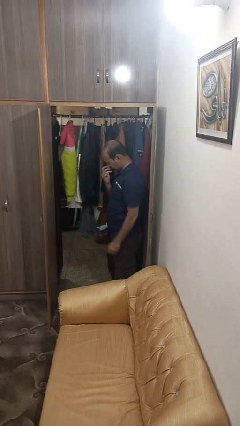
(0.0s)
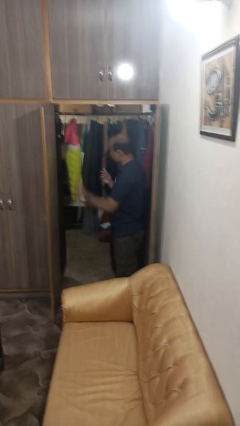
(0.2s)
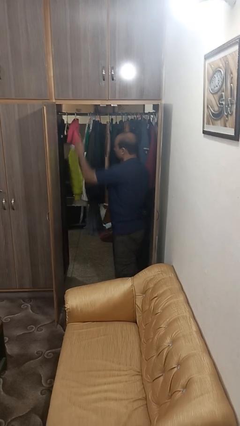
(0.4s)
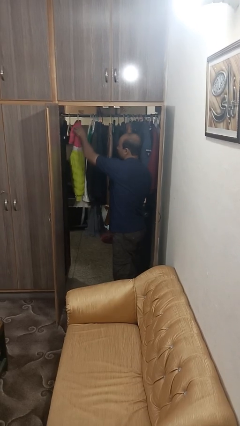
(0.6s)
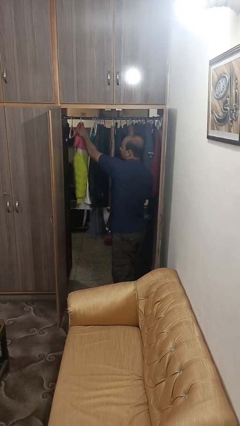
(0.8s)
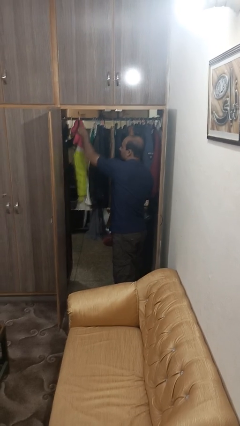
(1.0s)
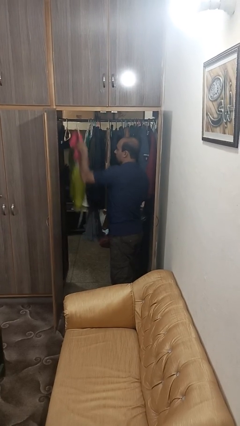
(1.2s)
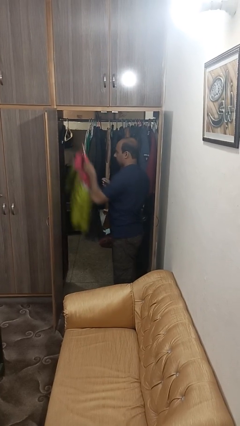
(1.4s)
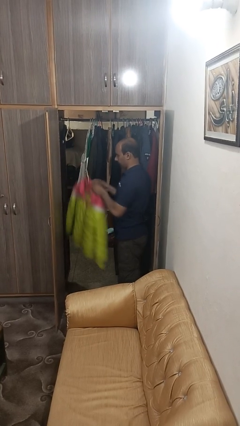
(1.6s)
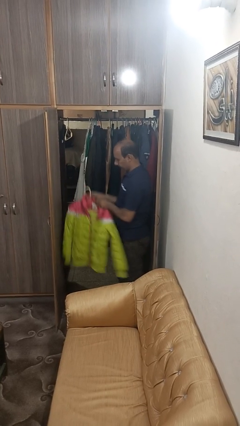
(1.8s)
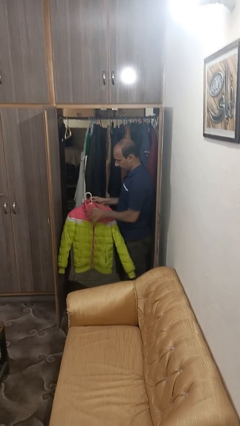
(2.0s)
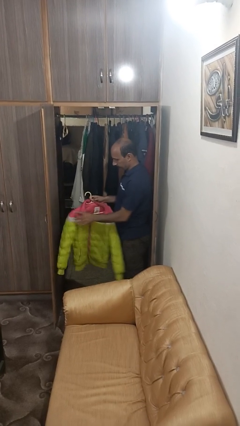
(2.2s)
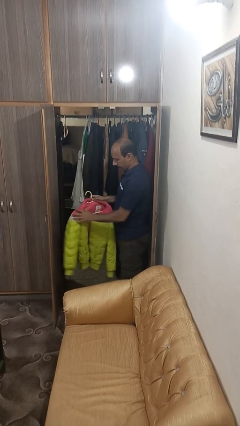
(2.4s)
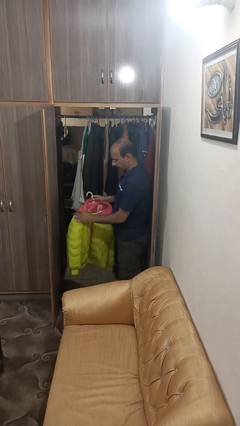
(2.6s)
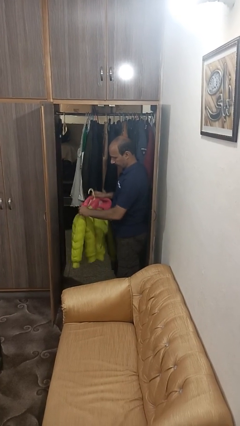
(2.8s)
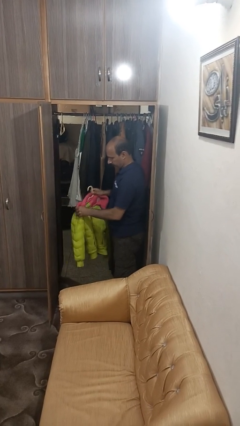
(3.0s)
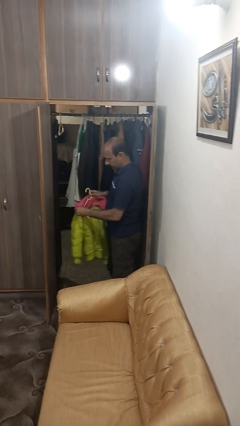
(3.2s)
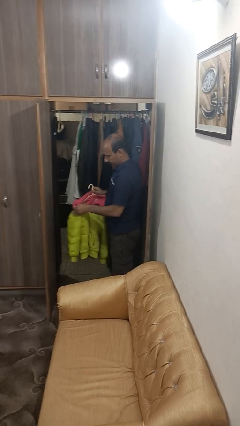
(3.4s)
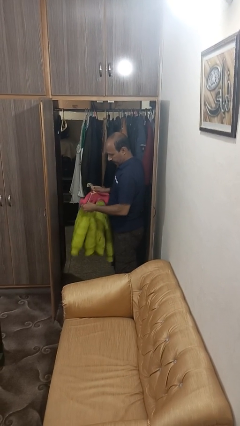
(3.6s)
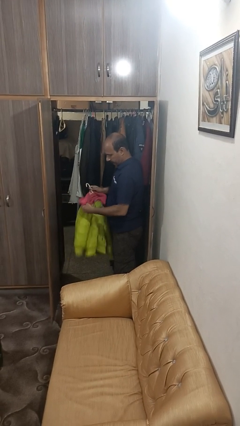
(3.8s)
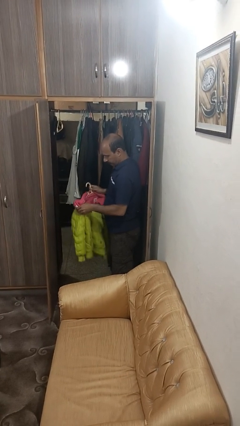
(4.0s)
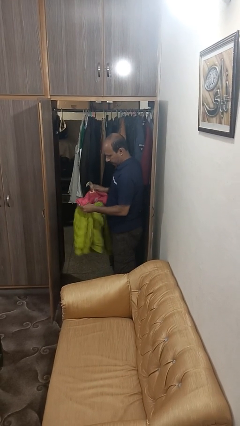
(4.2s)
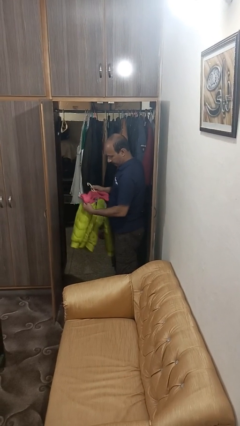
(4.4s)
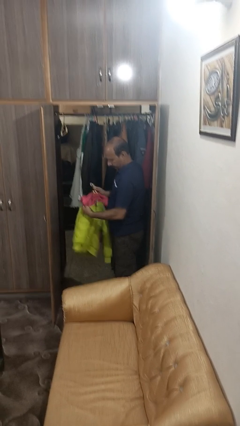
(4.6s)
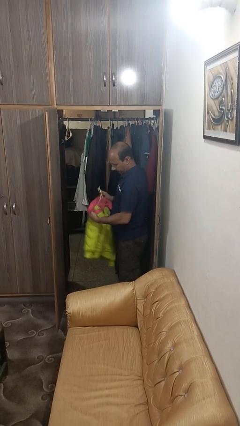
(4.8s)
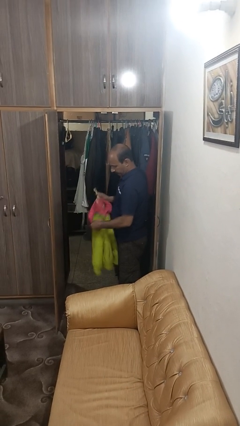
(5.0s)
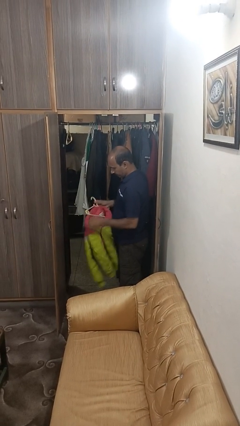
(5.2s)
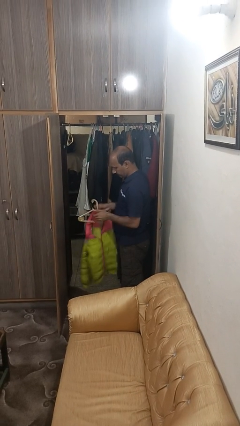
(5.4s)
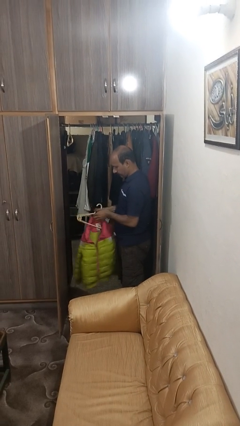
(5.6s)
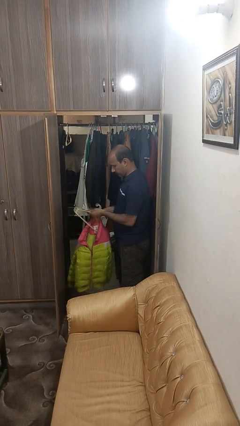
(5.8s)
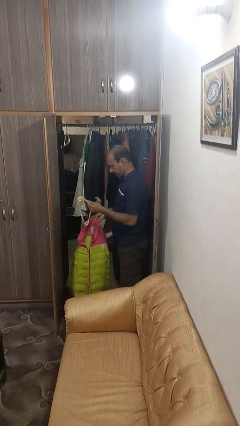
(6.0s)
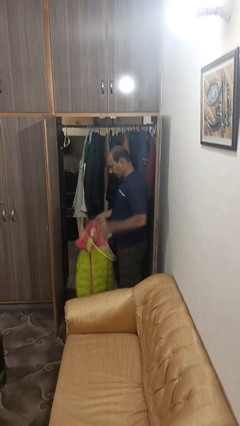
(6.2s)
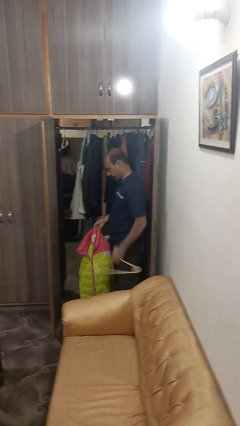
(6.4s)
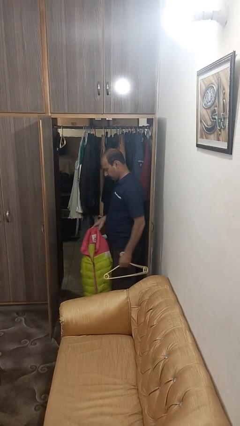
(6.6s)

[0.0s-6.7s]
person takes clothes from closet

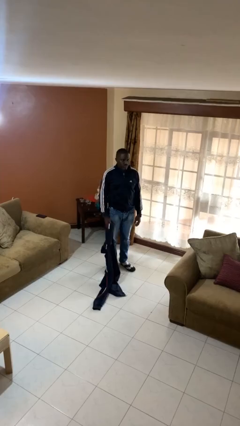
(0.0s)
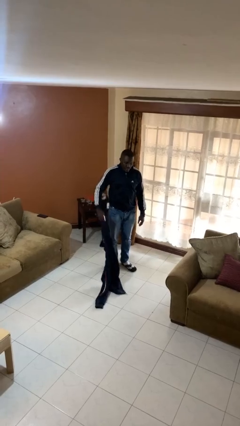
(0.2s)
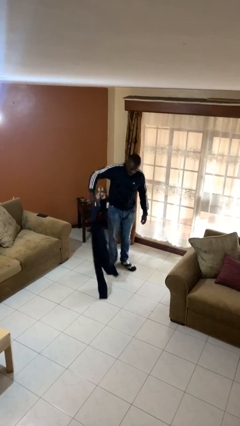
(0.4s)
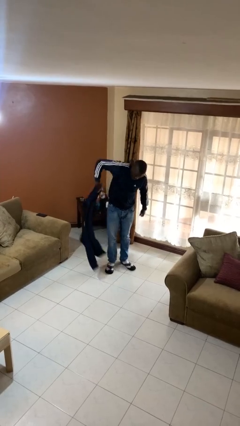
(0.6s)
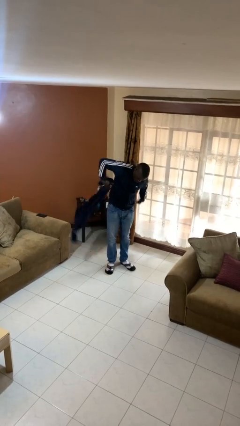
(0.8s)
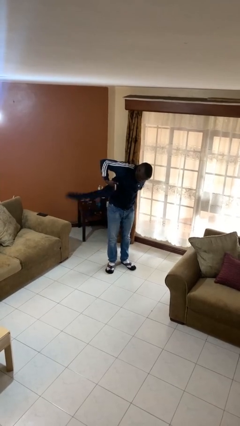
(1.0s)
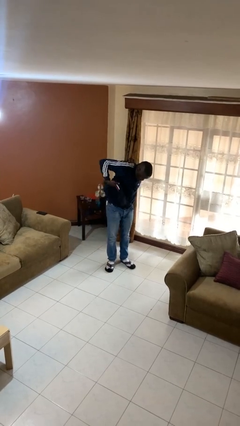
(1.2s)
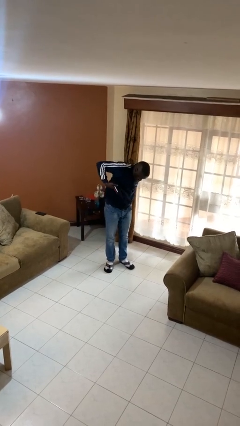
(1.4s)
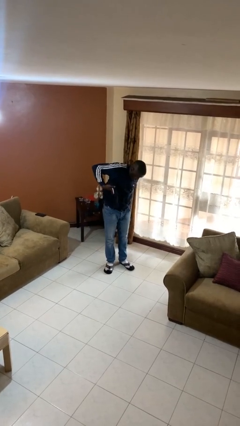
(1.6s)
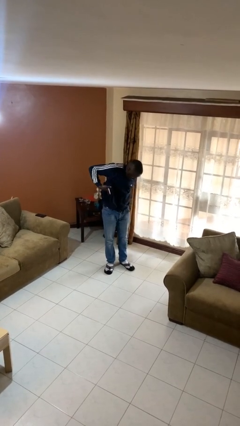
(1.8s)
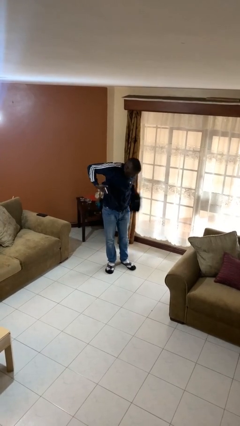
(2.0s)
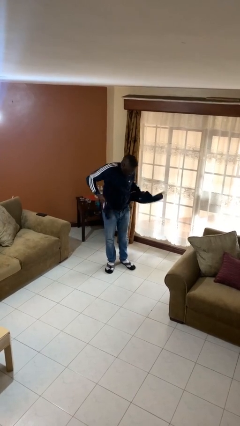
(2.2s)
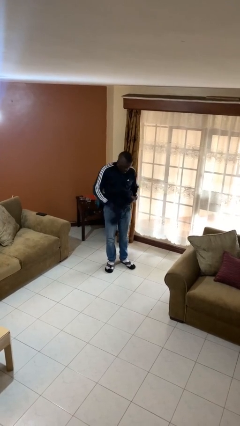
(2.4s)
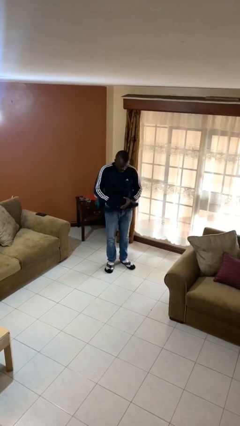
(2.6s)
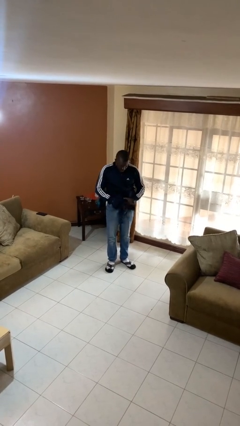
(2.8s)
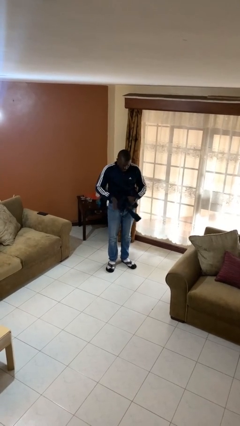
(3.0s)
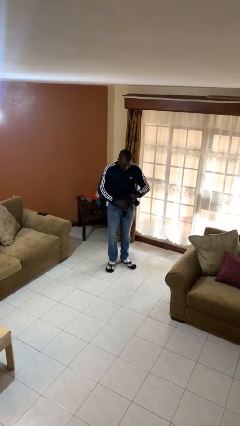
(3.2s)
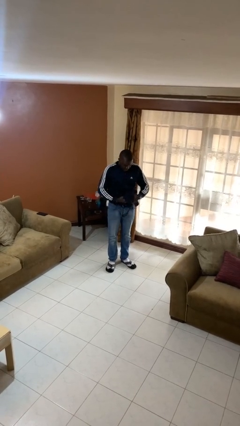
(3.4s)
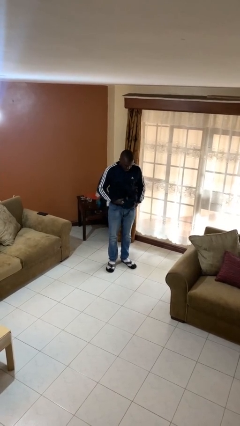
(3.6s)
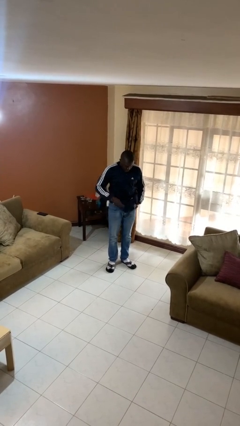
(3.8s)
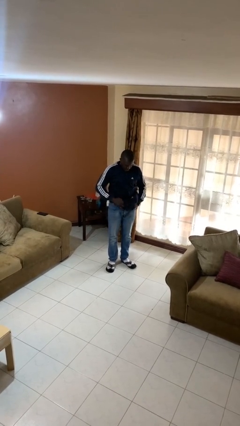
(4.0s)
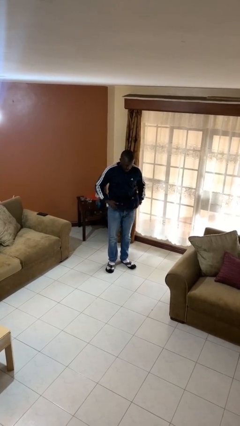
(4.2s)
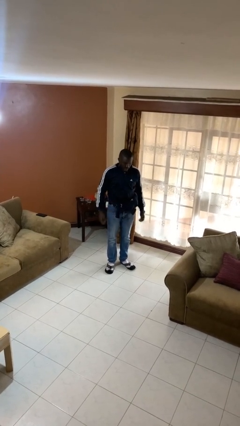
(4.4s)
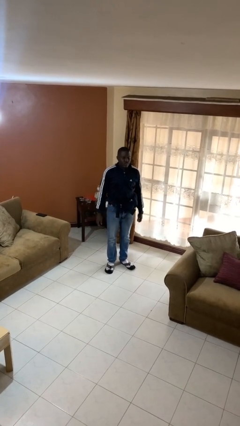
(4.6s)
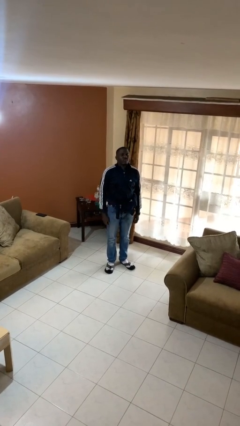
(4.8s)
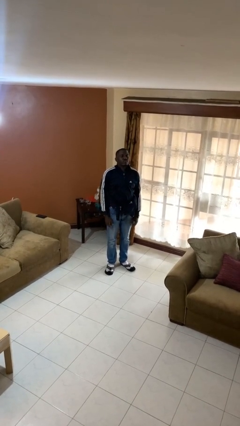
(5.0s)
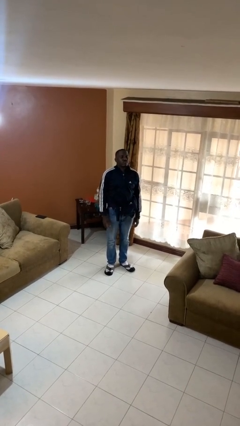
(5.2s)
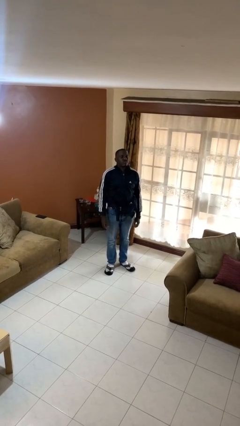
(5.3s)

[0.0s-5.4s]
person ties jacket around waist

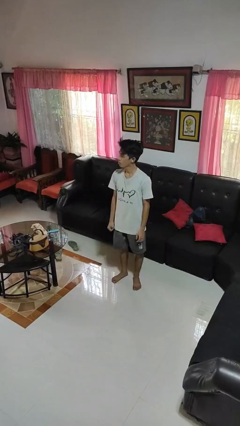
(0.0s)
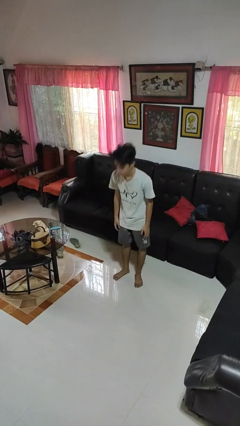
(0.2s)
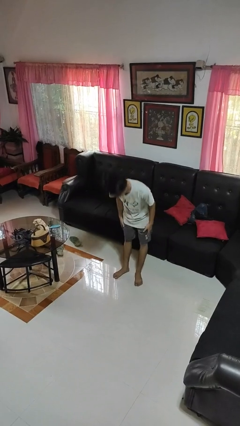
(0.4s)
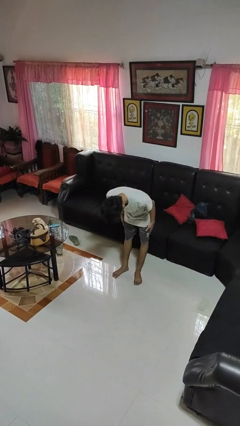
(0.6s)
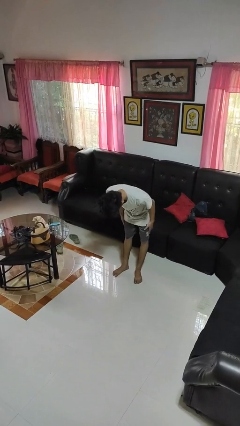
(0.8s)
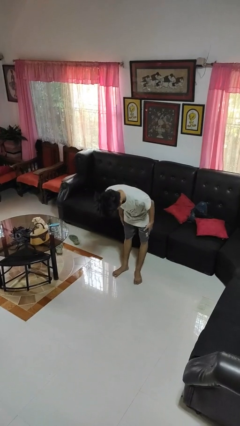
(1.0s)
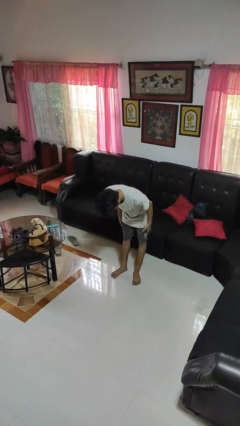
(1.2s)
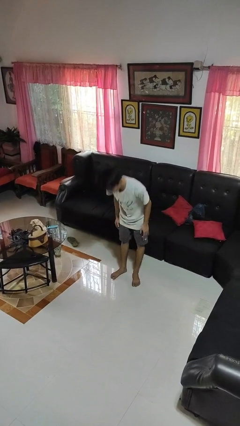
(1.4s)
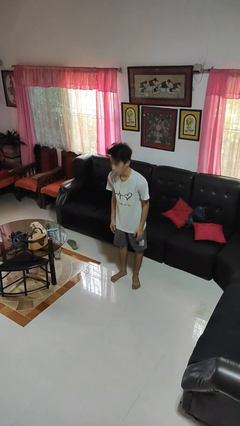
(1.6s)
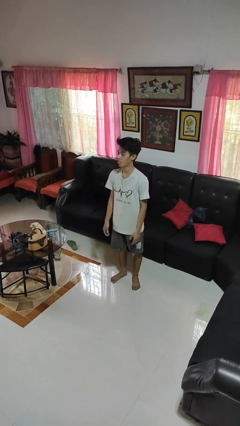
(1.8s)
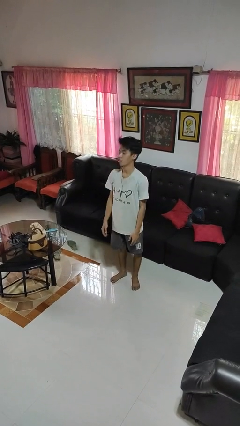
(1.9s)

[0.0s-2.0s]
person bows

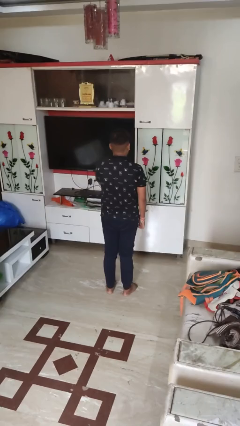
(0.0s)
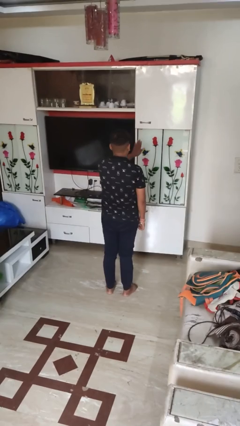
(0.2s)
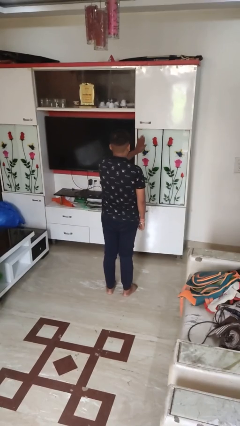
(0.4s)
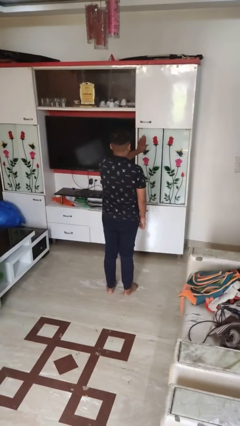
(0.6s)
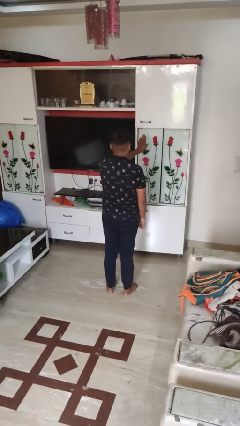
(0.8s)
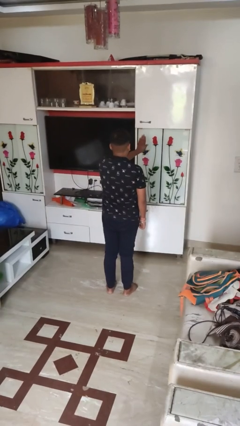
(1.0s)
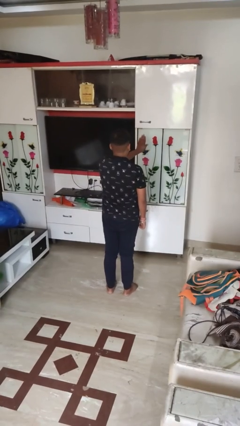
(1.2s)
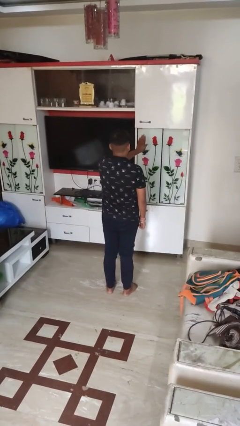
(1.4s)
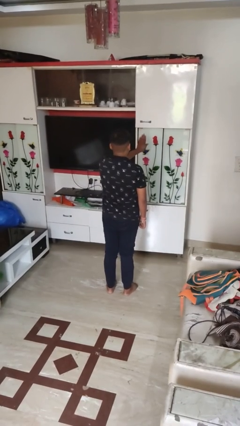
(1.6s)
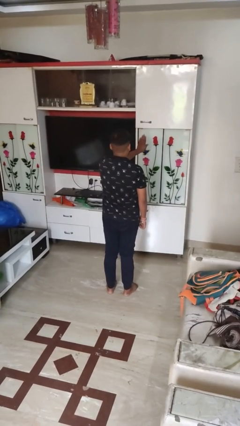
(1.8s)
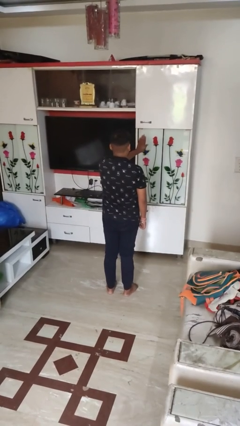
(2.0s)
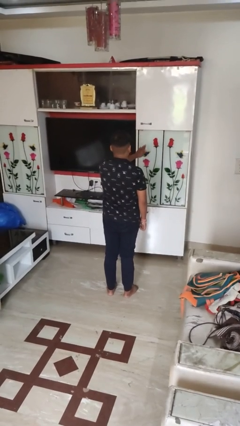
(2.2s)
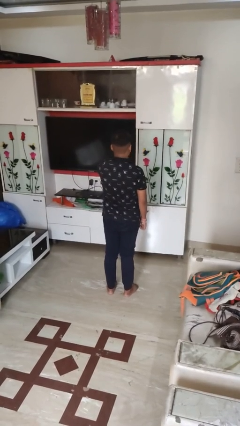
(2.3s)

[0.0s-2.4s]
person gestures stop

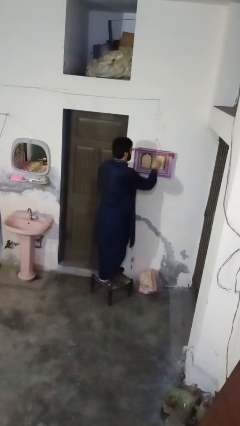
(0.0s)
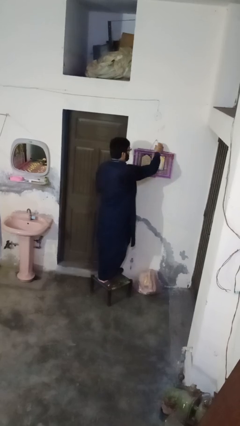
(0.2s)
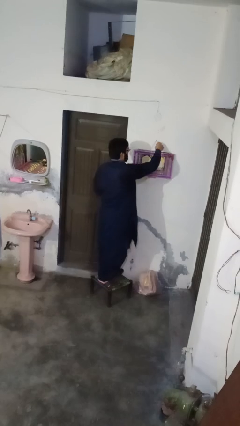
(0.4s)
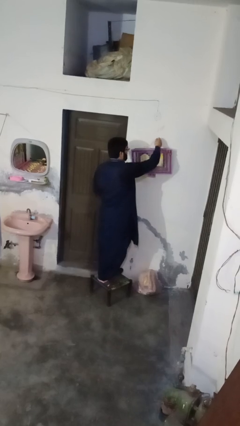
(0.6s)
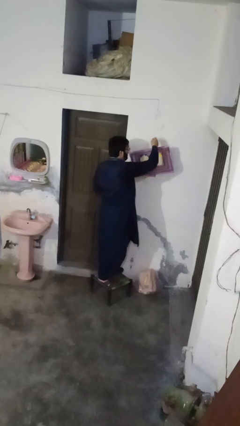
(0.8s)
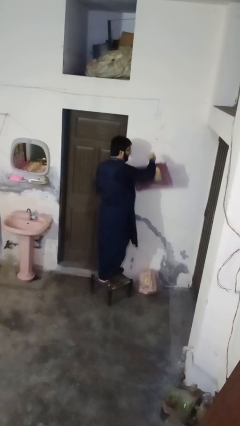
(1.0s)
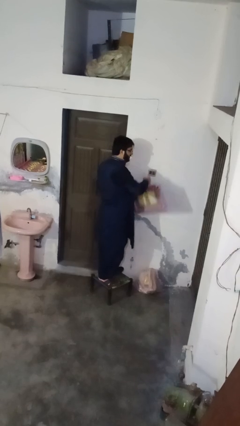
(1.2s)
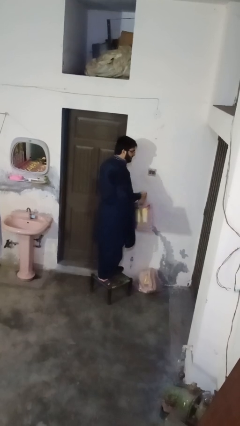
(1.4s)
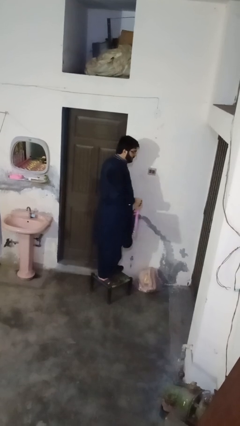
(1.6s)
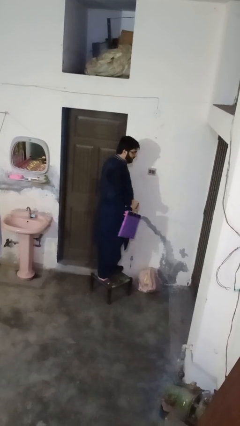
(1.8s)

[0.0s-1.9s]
person takes down picture frame
